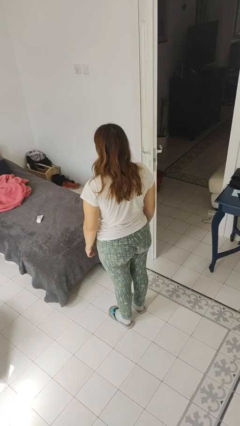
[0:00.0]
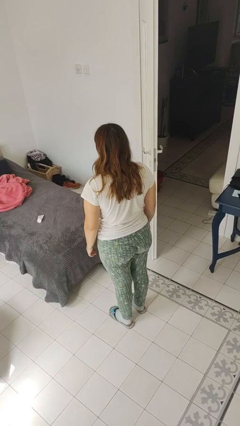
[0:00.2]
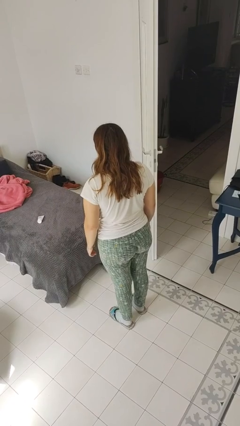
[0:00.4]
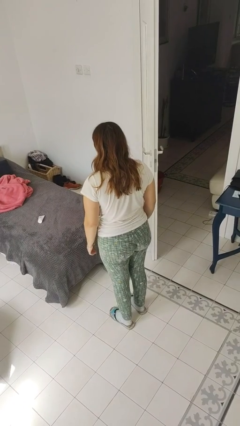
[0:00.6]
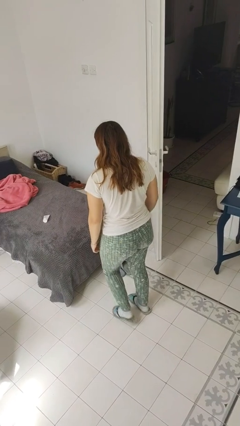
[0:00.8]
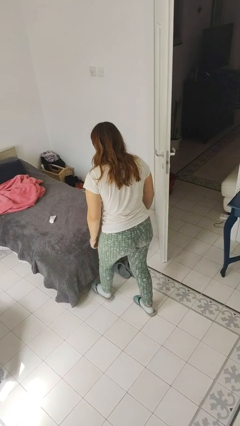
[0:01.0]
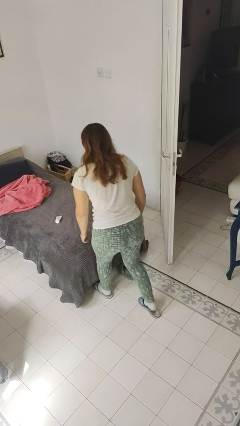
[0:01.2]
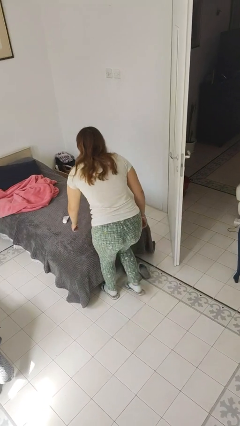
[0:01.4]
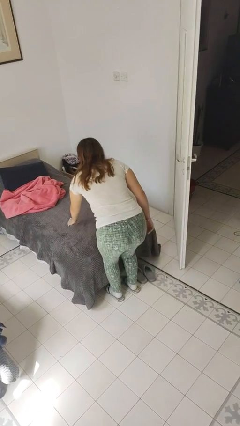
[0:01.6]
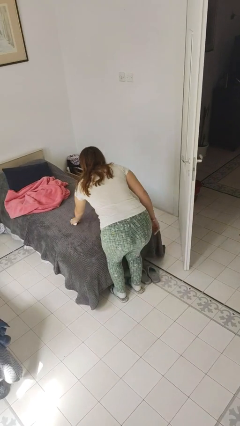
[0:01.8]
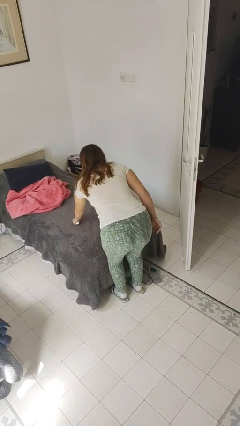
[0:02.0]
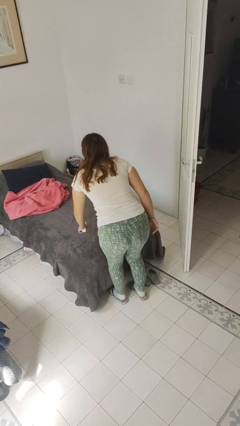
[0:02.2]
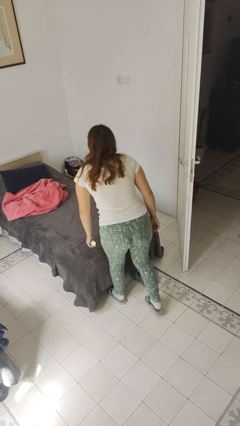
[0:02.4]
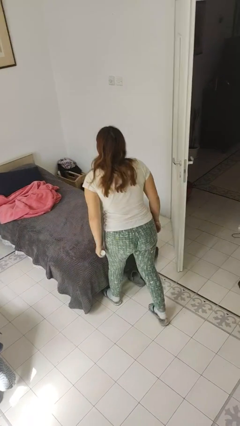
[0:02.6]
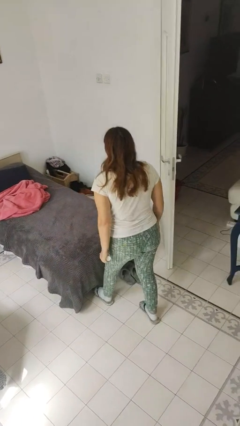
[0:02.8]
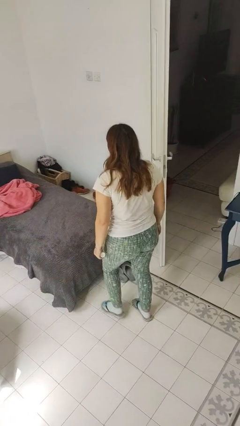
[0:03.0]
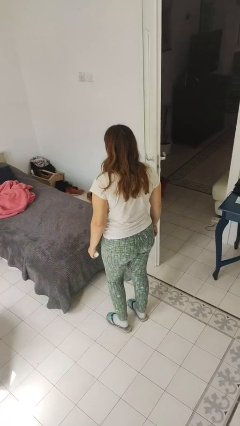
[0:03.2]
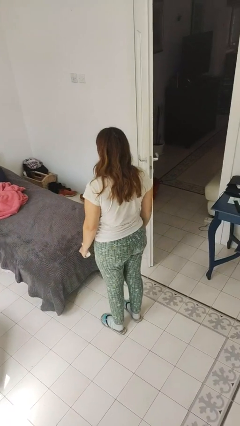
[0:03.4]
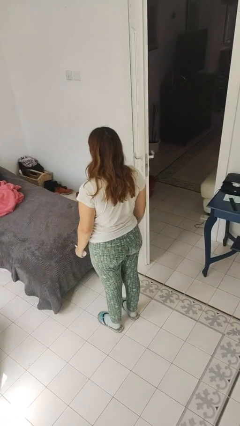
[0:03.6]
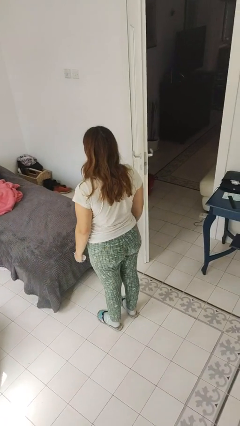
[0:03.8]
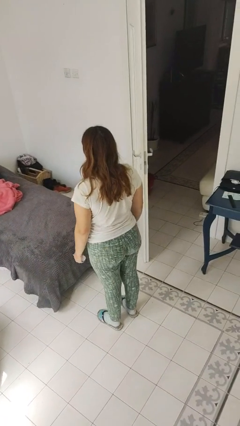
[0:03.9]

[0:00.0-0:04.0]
person picks up object from bed

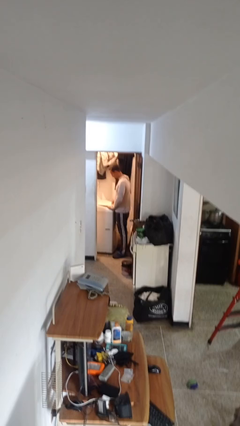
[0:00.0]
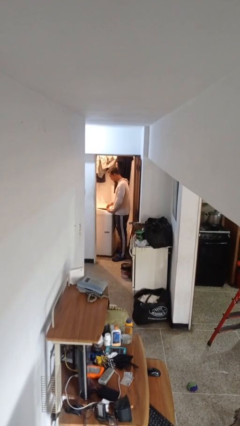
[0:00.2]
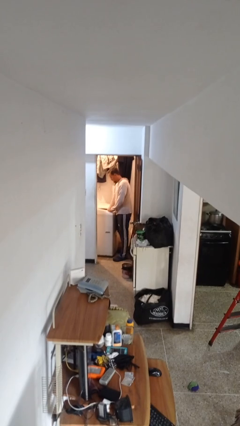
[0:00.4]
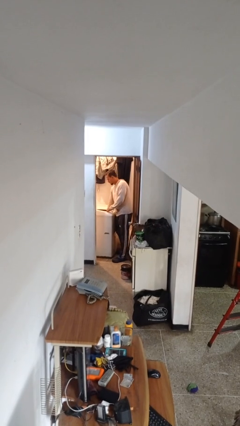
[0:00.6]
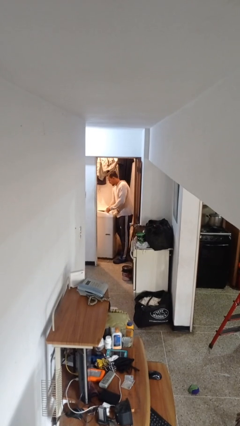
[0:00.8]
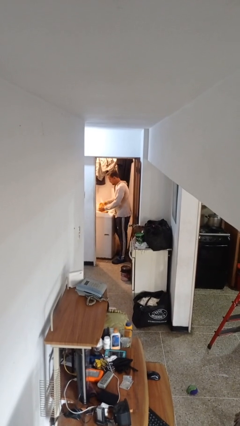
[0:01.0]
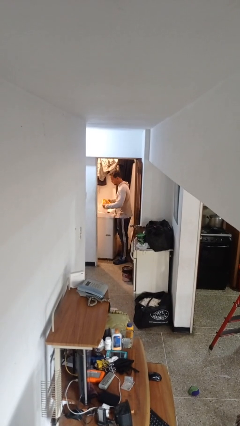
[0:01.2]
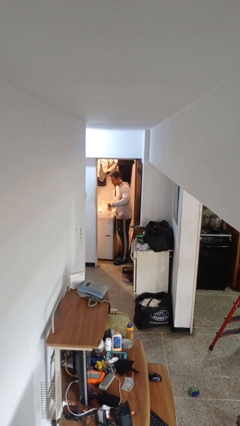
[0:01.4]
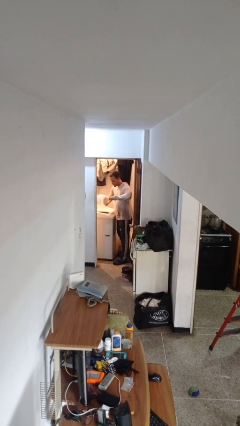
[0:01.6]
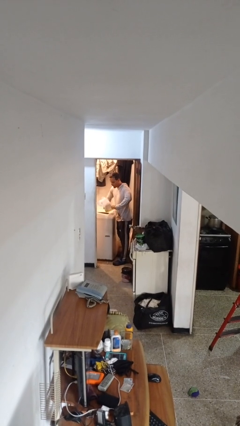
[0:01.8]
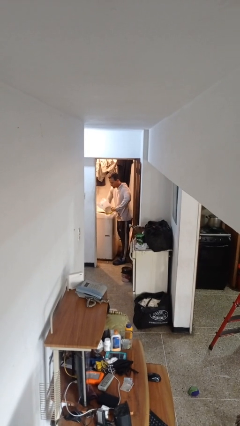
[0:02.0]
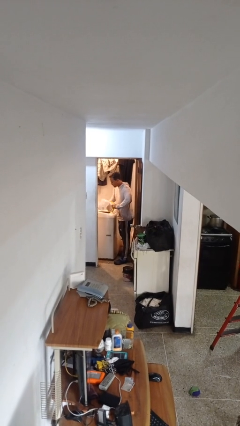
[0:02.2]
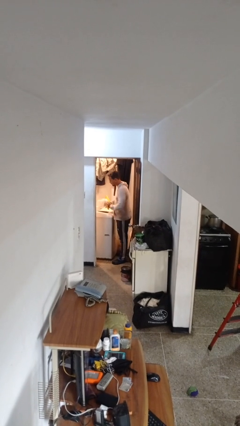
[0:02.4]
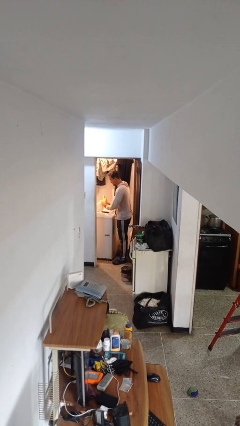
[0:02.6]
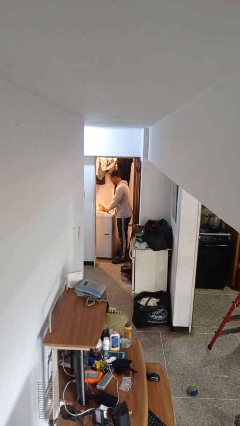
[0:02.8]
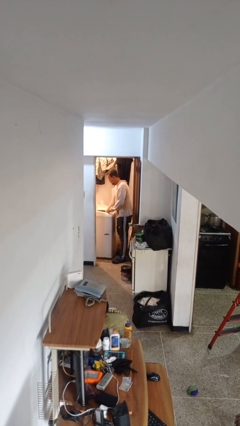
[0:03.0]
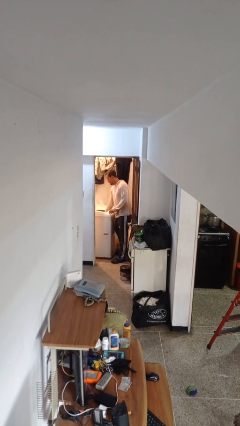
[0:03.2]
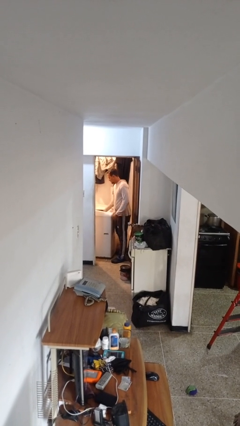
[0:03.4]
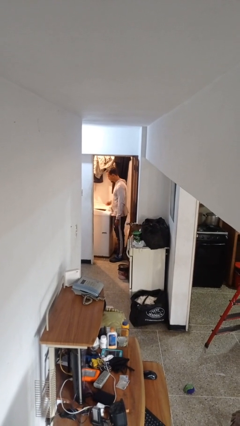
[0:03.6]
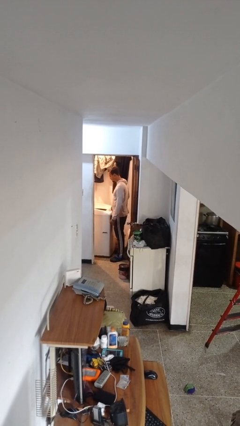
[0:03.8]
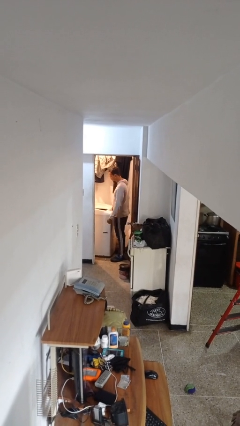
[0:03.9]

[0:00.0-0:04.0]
person cleans dryer lint trap

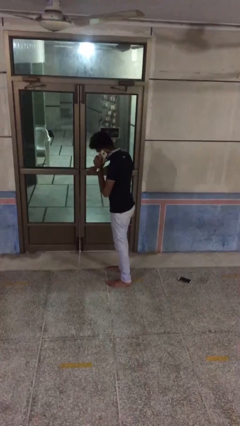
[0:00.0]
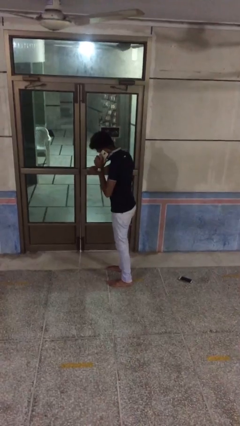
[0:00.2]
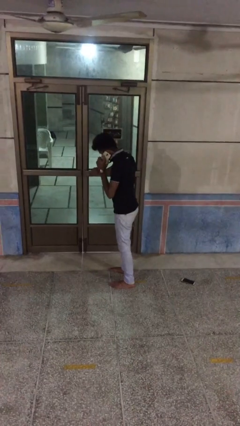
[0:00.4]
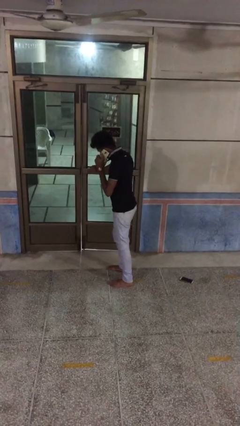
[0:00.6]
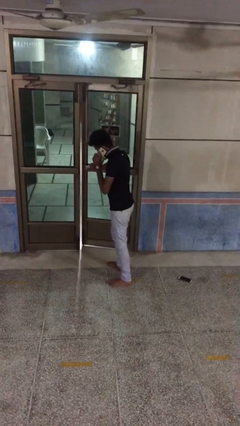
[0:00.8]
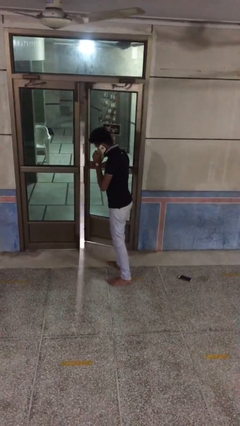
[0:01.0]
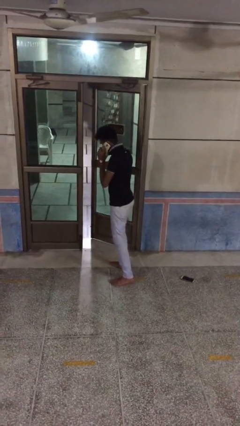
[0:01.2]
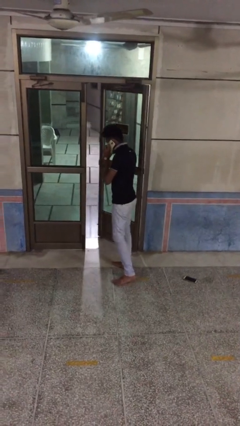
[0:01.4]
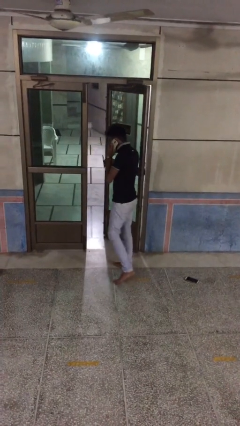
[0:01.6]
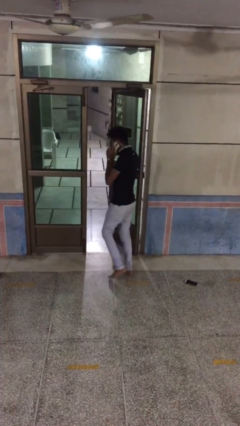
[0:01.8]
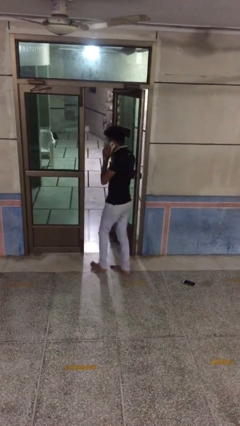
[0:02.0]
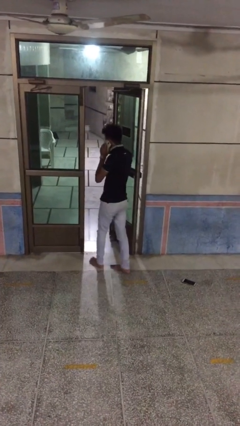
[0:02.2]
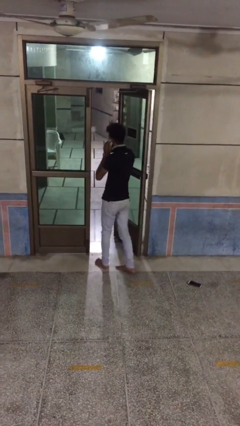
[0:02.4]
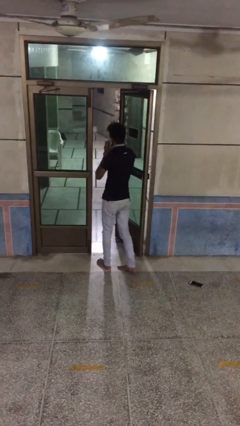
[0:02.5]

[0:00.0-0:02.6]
person opens facility door

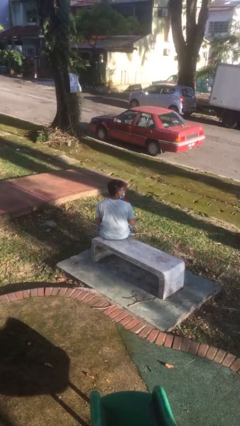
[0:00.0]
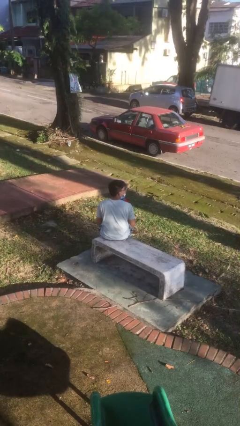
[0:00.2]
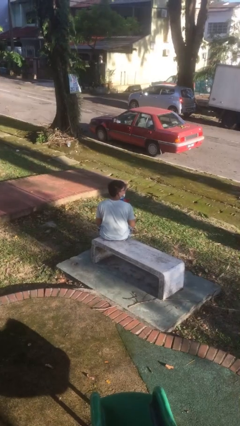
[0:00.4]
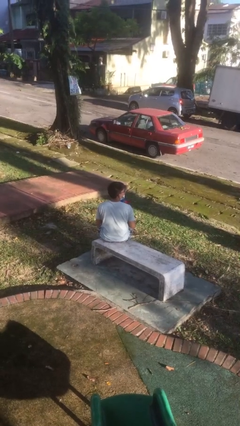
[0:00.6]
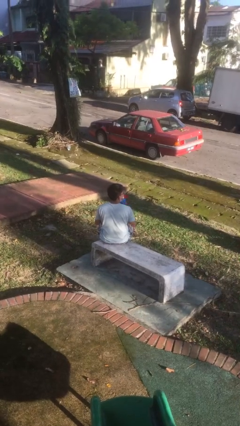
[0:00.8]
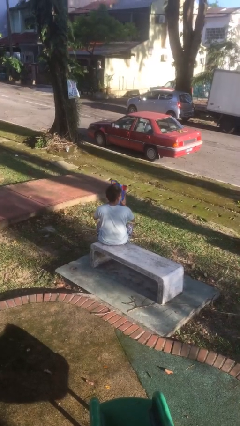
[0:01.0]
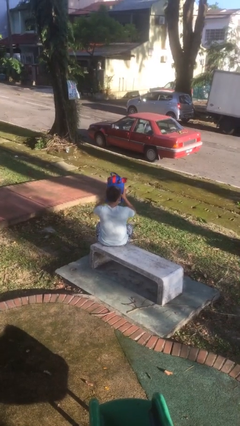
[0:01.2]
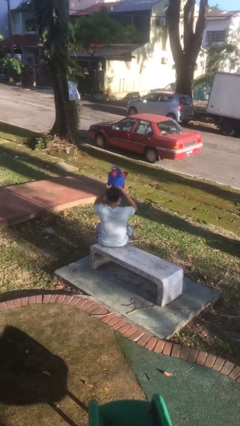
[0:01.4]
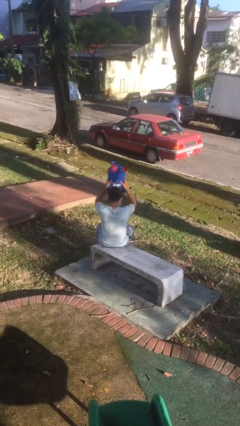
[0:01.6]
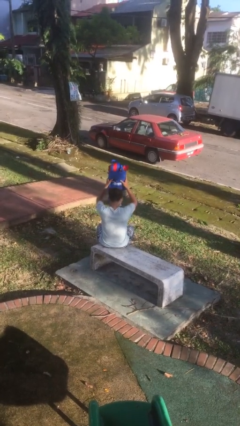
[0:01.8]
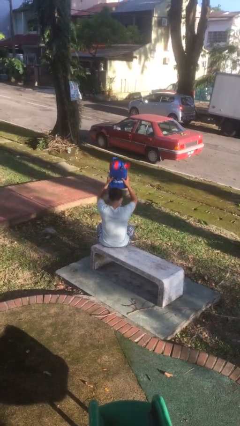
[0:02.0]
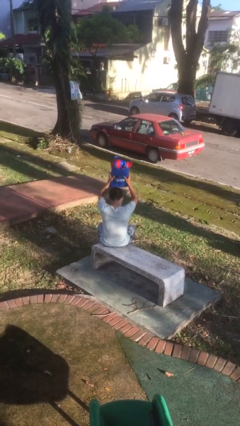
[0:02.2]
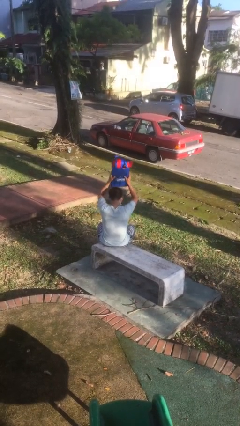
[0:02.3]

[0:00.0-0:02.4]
person holds object above head

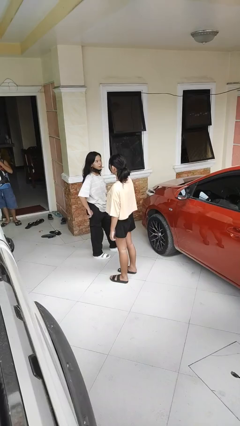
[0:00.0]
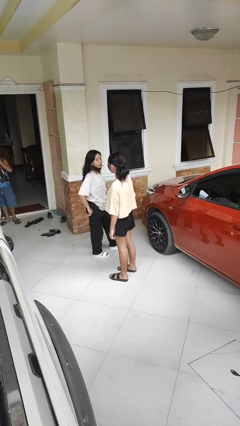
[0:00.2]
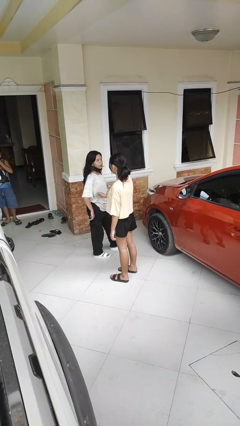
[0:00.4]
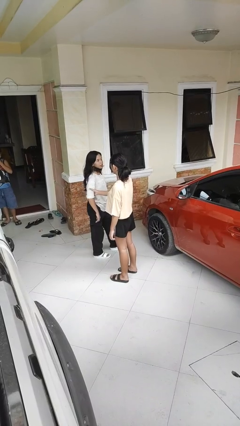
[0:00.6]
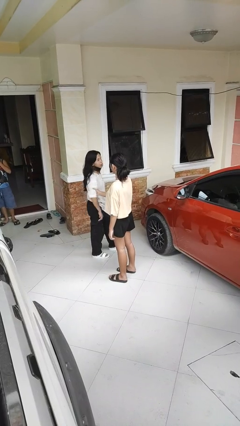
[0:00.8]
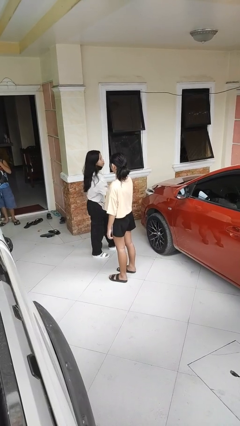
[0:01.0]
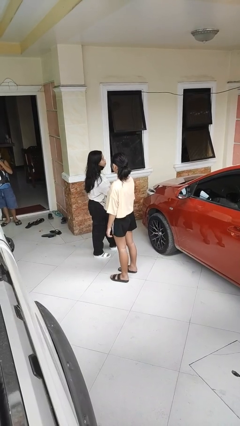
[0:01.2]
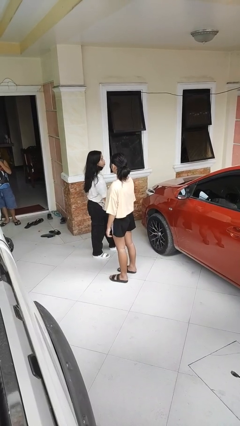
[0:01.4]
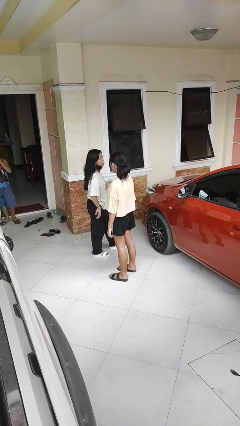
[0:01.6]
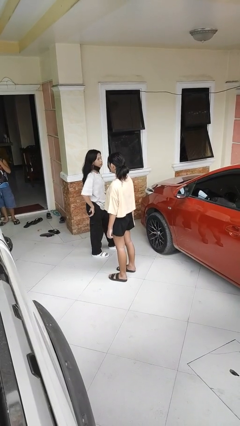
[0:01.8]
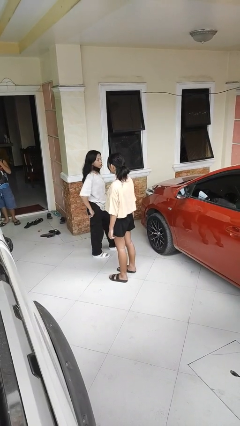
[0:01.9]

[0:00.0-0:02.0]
person grabs person by bicep

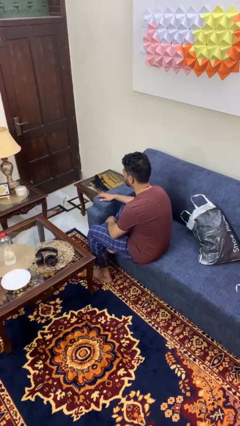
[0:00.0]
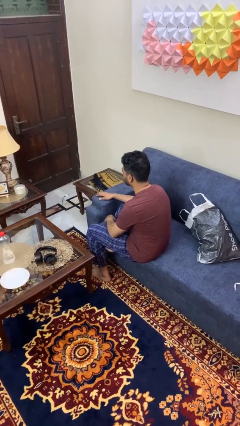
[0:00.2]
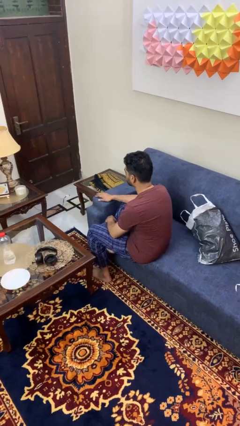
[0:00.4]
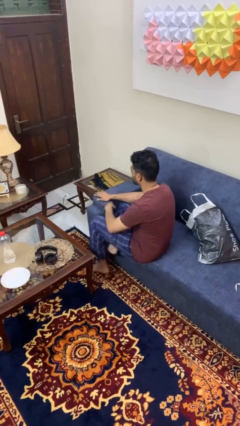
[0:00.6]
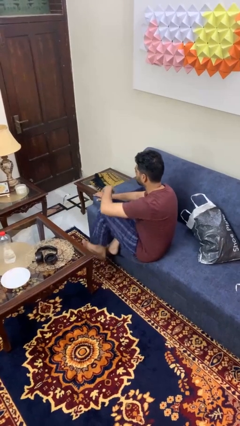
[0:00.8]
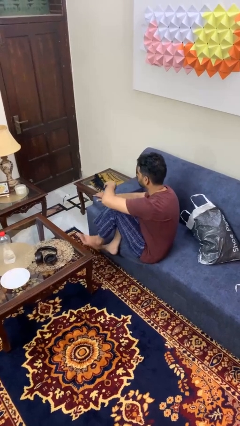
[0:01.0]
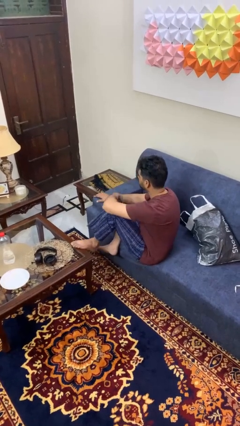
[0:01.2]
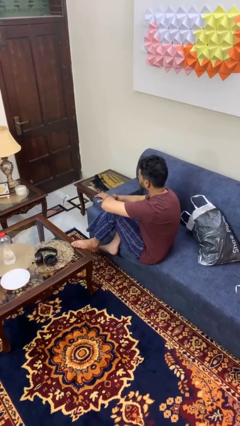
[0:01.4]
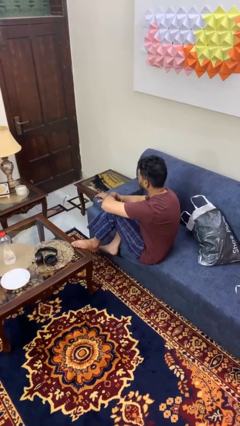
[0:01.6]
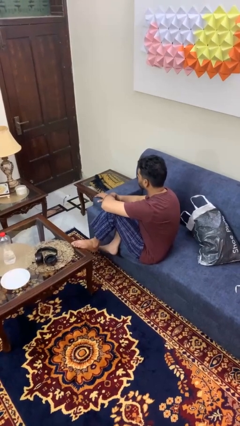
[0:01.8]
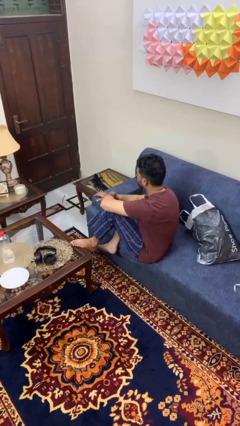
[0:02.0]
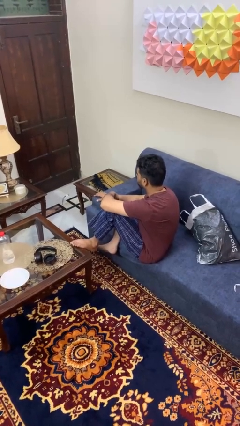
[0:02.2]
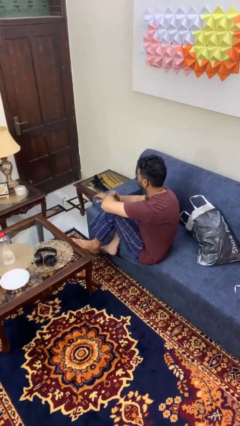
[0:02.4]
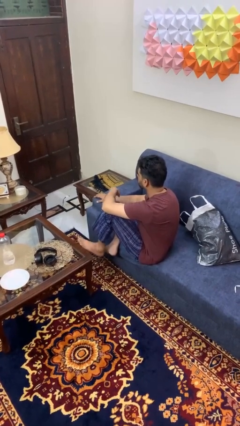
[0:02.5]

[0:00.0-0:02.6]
person puts feet up

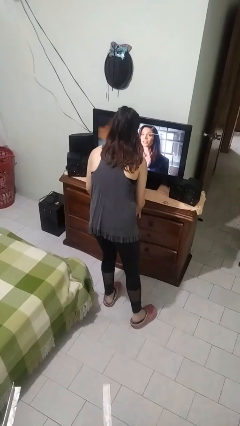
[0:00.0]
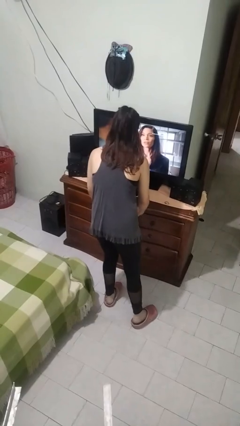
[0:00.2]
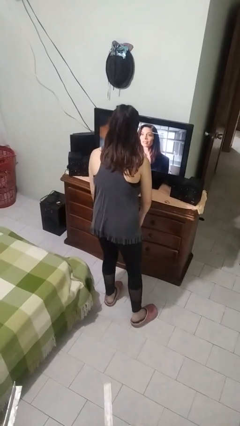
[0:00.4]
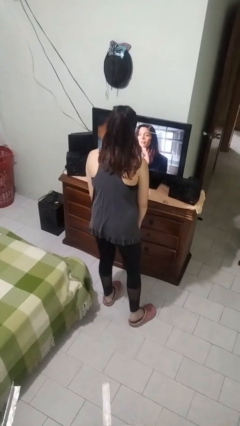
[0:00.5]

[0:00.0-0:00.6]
person closes dresser drawer
